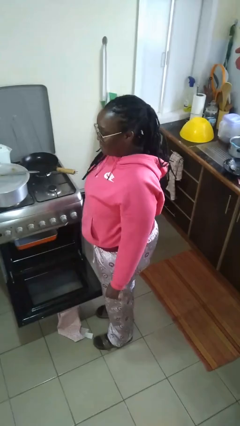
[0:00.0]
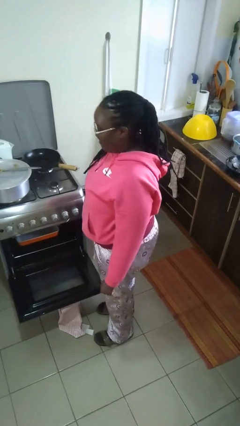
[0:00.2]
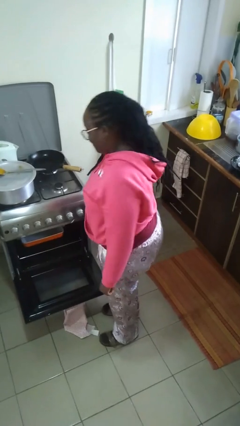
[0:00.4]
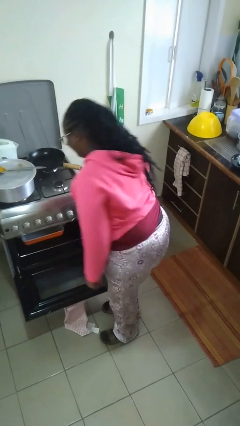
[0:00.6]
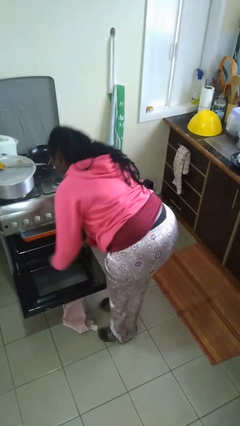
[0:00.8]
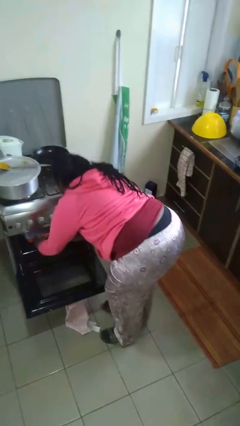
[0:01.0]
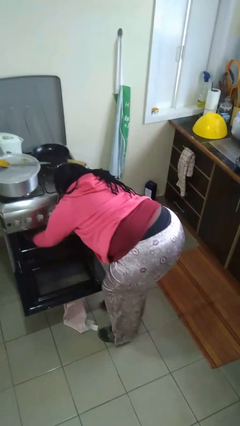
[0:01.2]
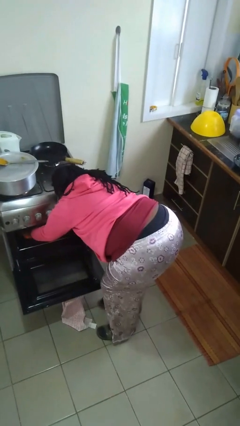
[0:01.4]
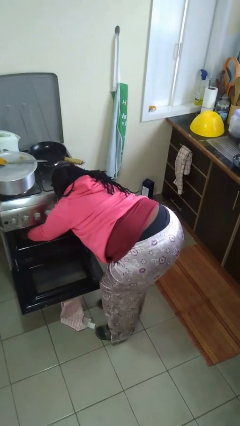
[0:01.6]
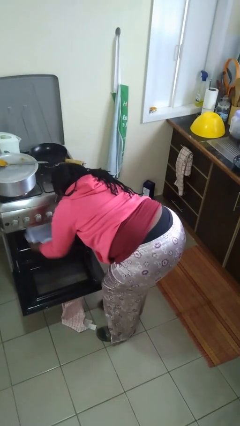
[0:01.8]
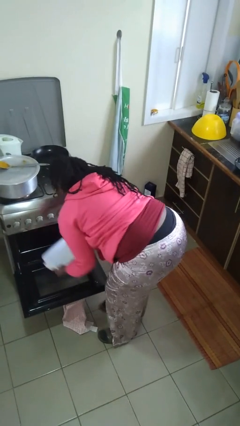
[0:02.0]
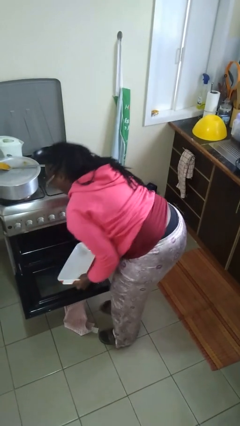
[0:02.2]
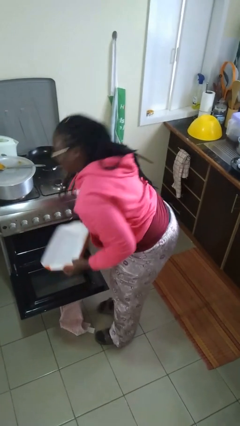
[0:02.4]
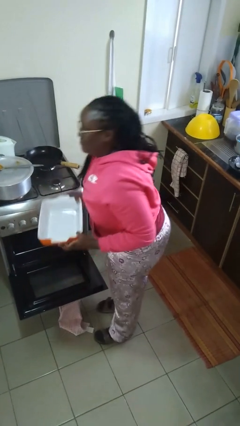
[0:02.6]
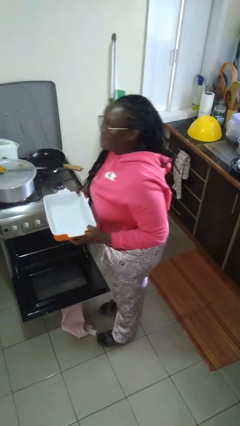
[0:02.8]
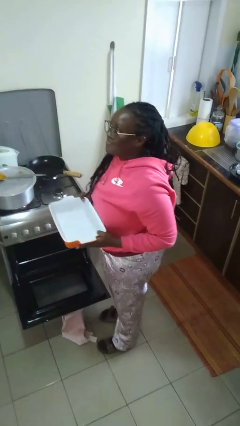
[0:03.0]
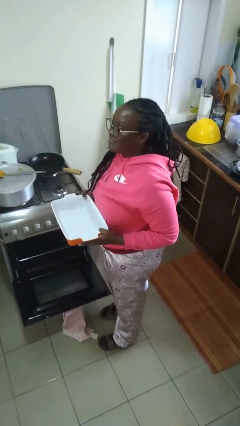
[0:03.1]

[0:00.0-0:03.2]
person takes object from oven

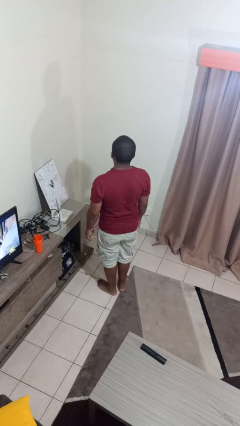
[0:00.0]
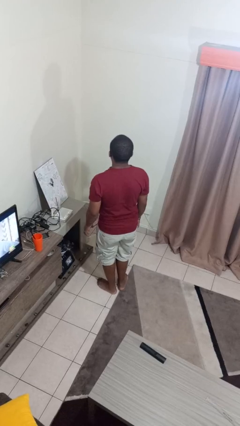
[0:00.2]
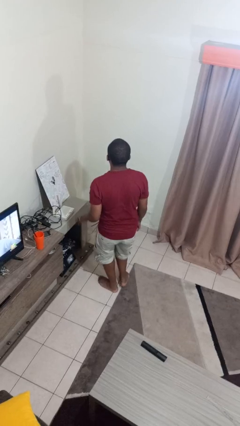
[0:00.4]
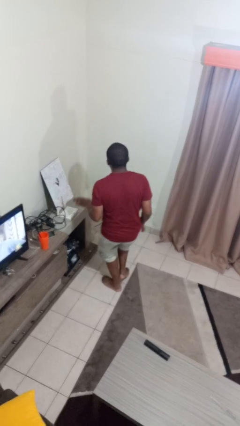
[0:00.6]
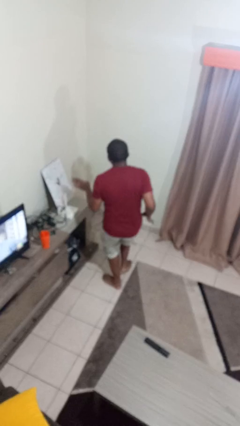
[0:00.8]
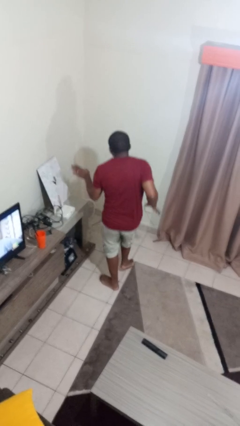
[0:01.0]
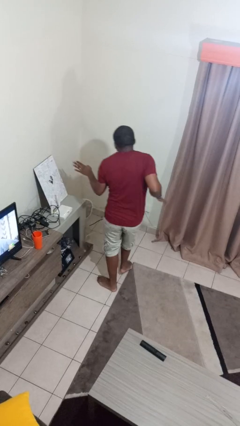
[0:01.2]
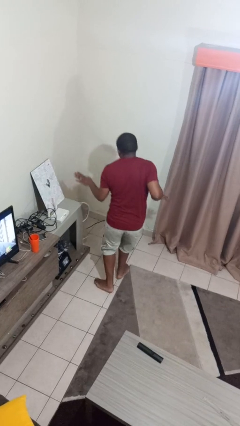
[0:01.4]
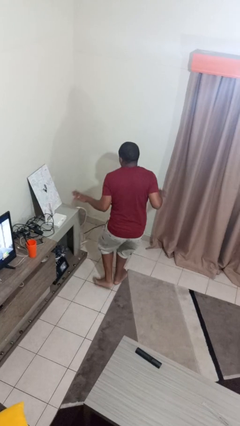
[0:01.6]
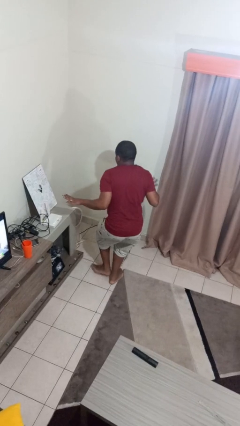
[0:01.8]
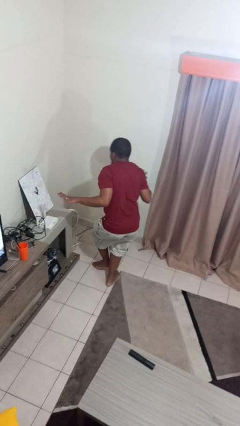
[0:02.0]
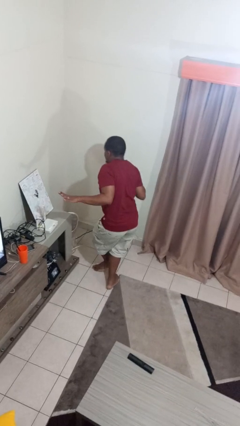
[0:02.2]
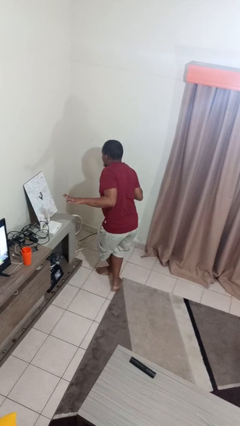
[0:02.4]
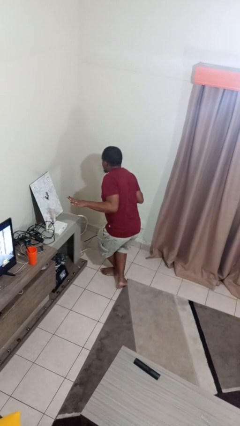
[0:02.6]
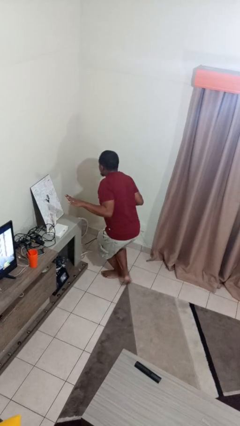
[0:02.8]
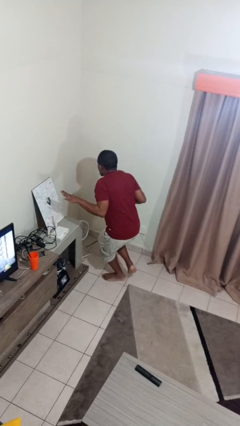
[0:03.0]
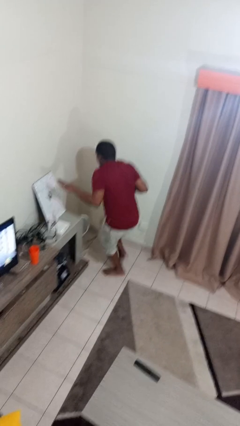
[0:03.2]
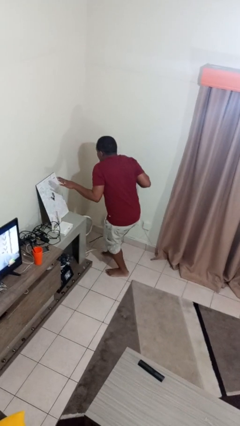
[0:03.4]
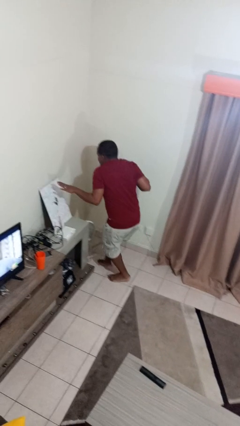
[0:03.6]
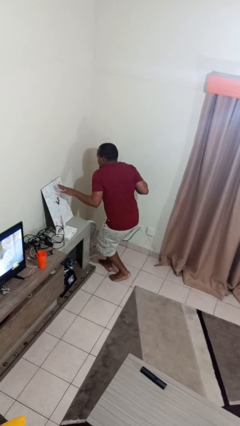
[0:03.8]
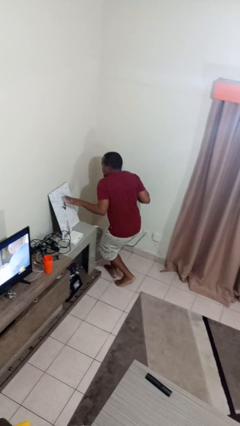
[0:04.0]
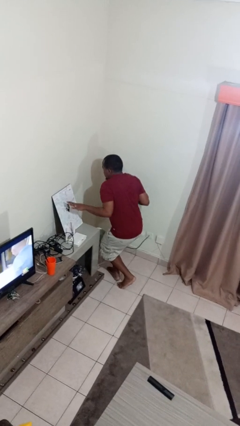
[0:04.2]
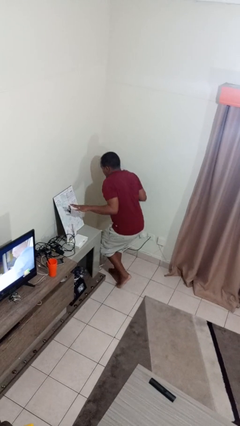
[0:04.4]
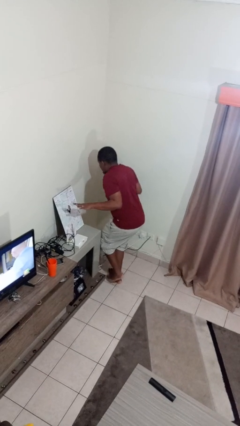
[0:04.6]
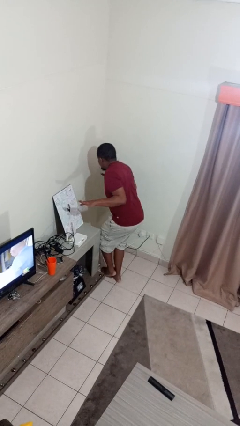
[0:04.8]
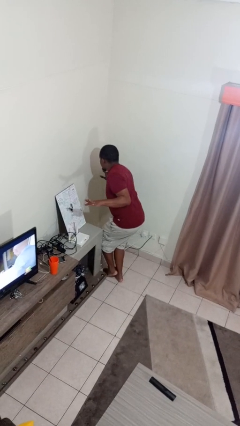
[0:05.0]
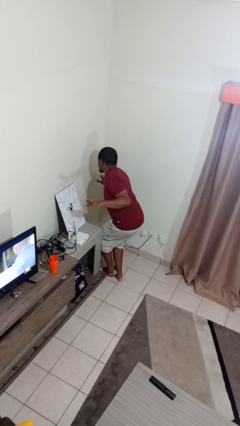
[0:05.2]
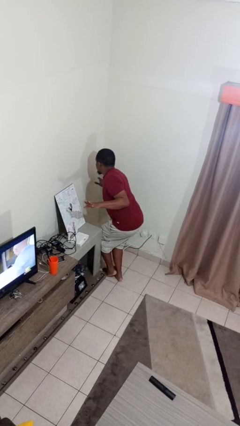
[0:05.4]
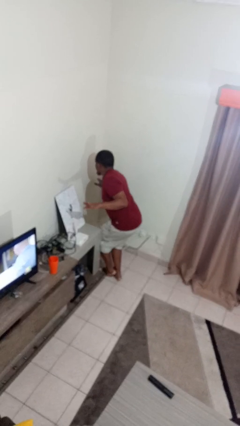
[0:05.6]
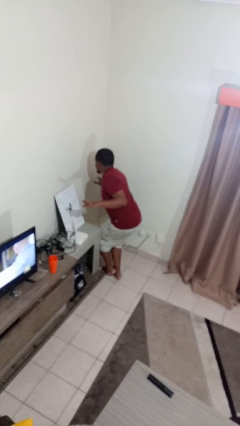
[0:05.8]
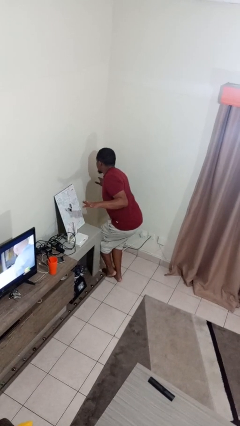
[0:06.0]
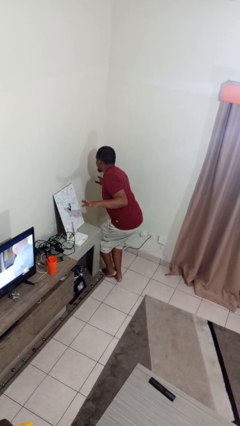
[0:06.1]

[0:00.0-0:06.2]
person walks tiptoe

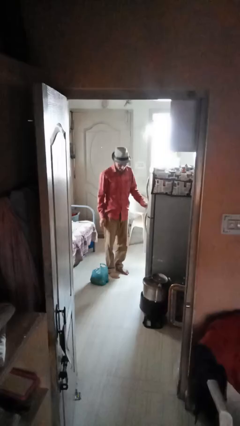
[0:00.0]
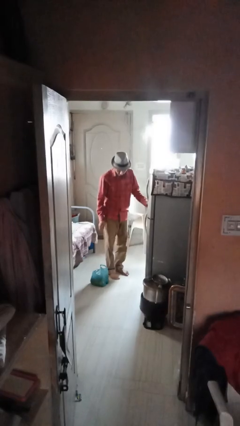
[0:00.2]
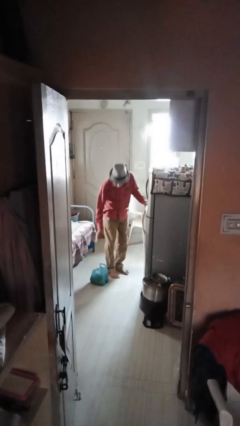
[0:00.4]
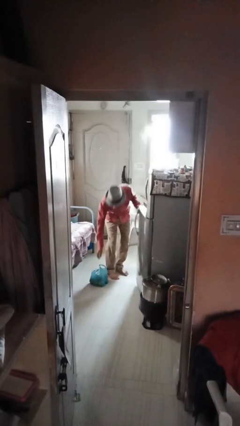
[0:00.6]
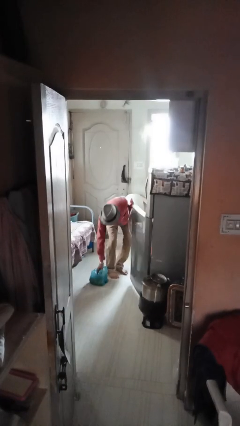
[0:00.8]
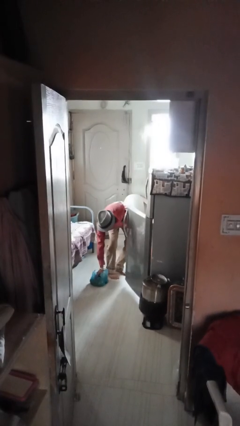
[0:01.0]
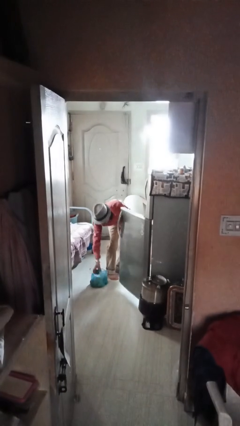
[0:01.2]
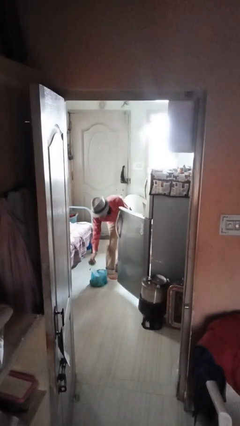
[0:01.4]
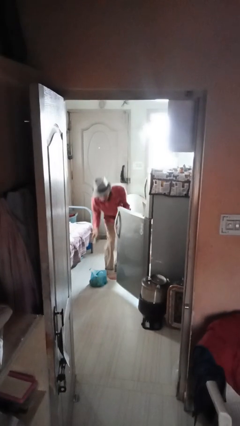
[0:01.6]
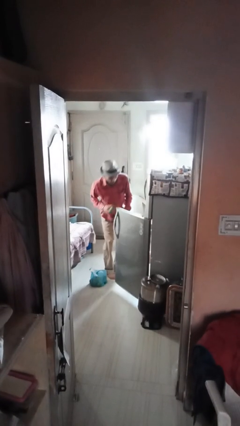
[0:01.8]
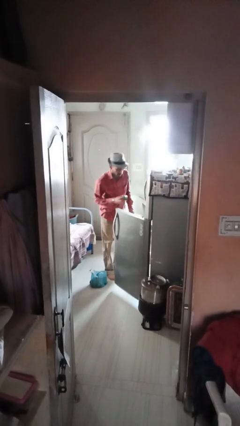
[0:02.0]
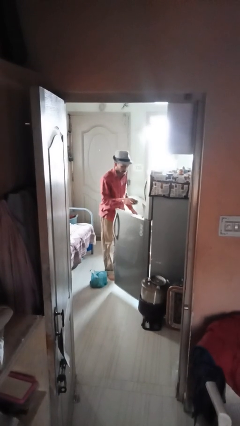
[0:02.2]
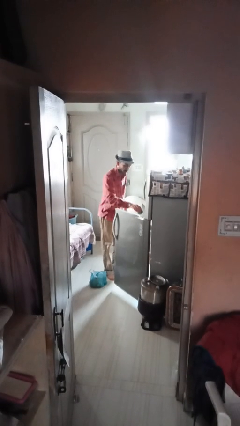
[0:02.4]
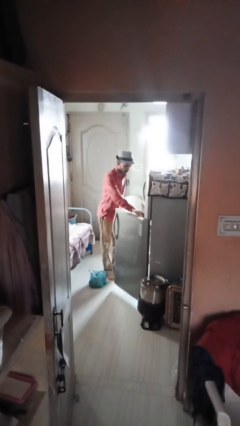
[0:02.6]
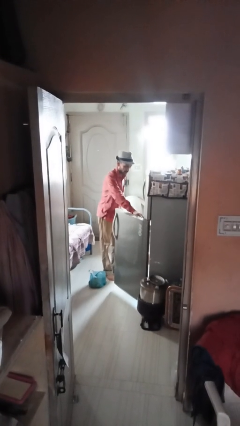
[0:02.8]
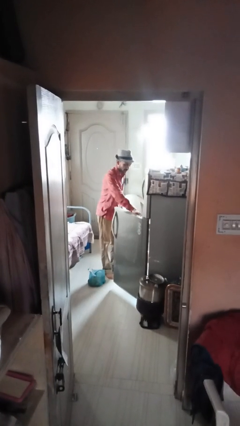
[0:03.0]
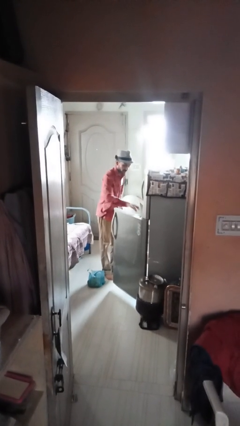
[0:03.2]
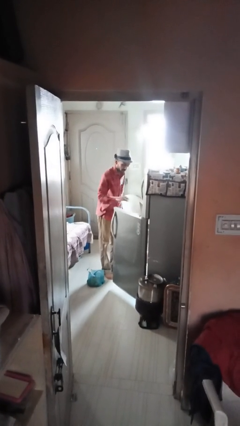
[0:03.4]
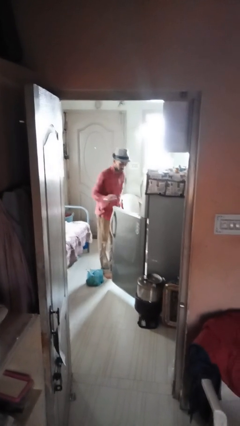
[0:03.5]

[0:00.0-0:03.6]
person loads groceries into refrigerator

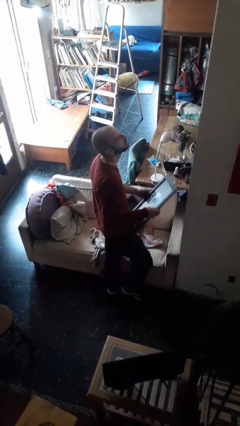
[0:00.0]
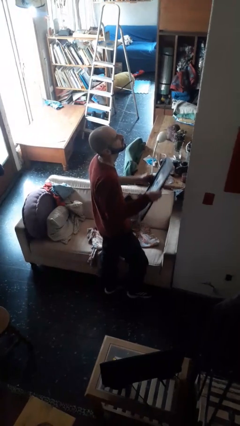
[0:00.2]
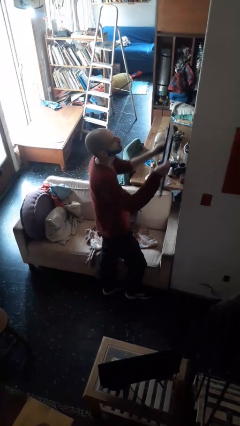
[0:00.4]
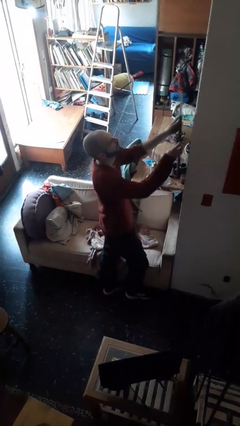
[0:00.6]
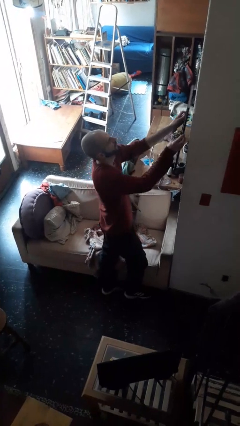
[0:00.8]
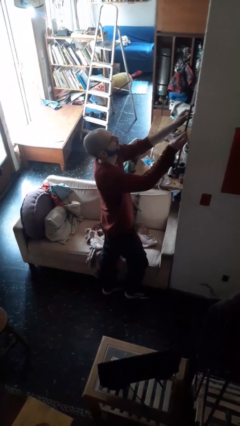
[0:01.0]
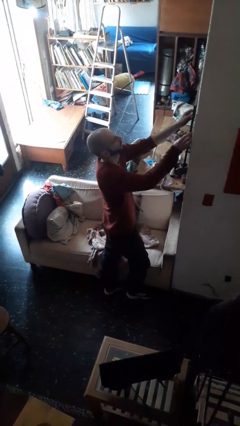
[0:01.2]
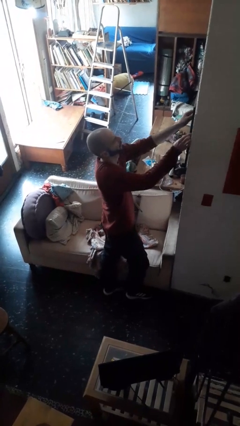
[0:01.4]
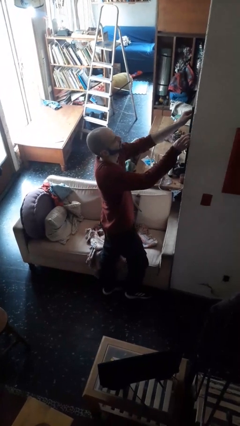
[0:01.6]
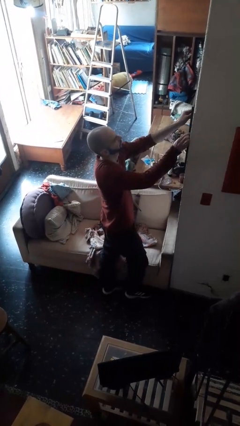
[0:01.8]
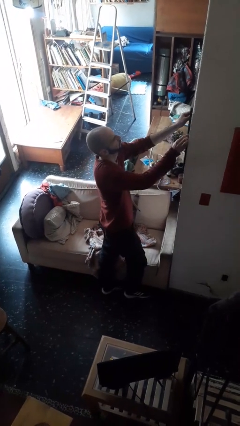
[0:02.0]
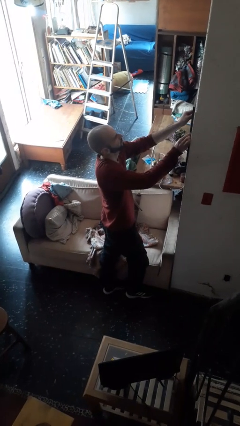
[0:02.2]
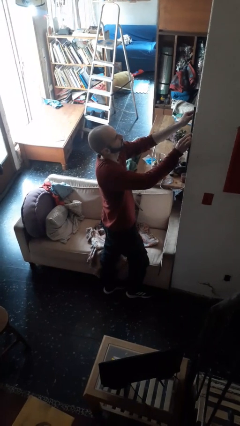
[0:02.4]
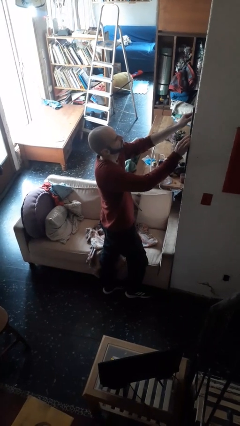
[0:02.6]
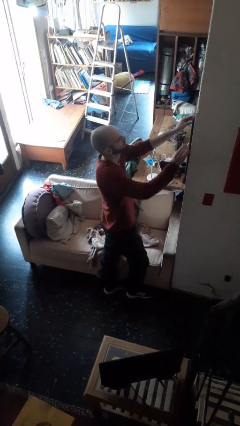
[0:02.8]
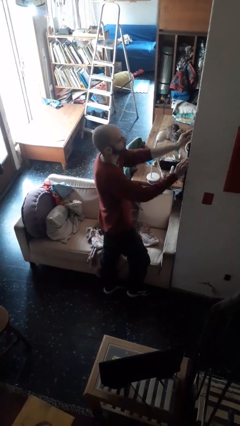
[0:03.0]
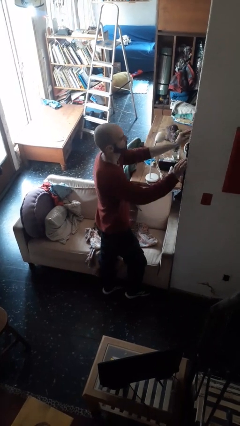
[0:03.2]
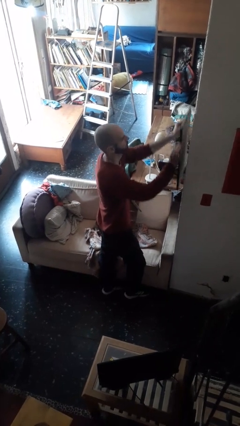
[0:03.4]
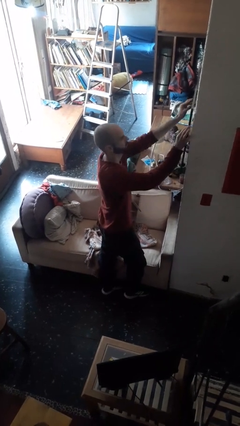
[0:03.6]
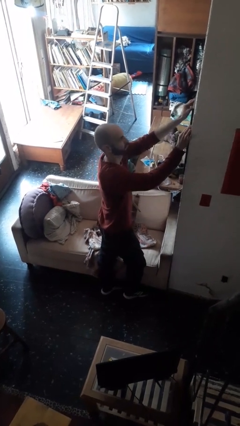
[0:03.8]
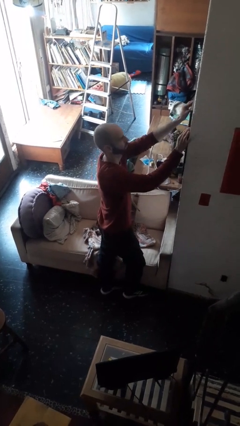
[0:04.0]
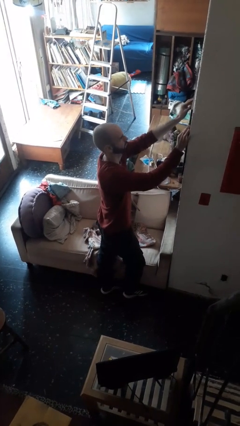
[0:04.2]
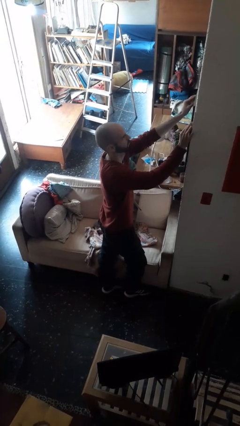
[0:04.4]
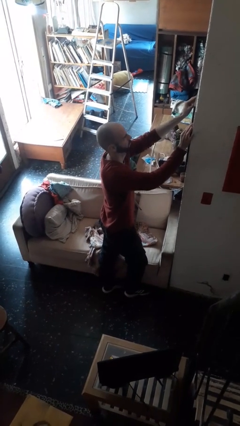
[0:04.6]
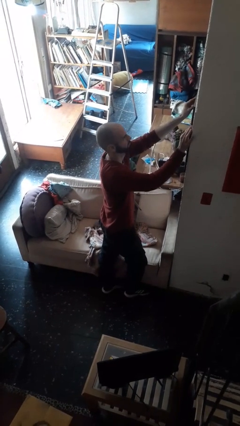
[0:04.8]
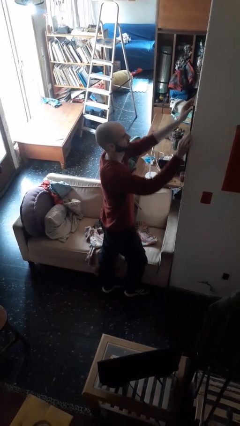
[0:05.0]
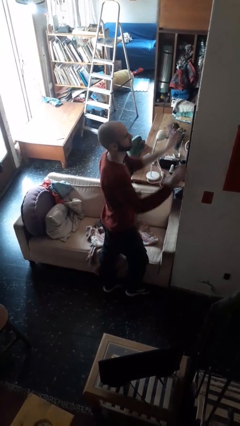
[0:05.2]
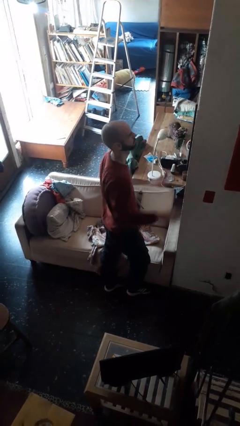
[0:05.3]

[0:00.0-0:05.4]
person puts up picture frame
